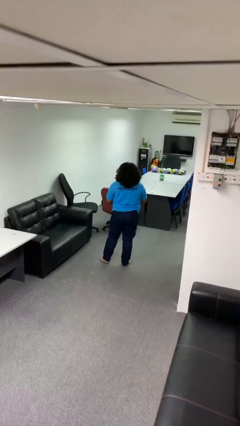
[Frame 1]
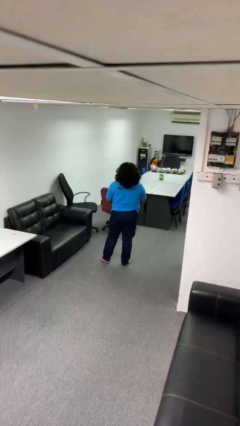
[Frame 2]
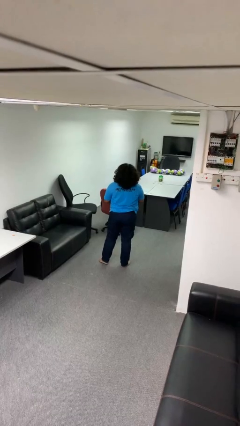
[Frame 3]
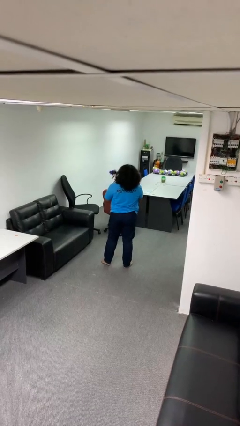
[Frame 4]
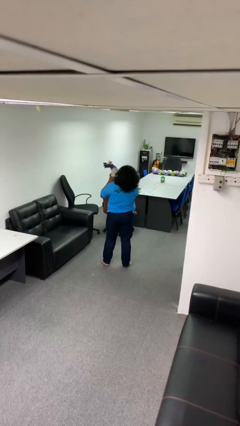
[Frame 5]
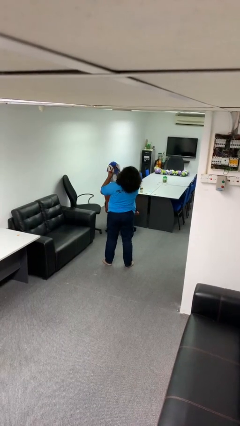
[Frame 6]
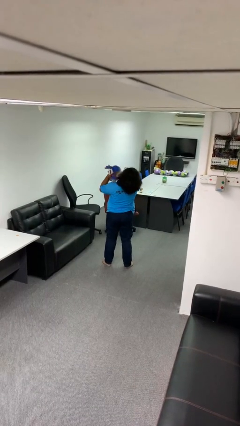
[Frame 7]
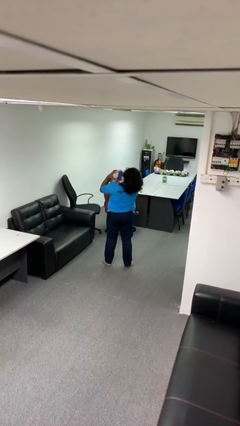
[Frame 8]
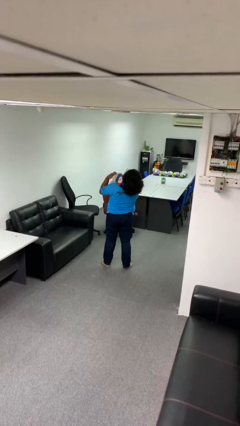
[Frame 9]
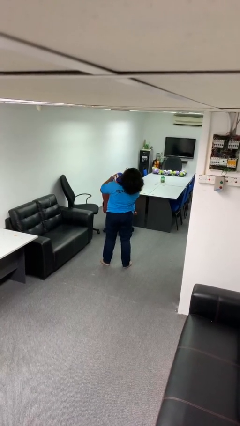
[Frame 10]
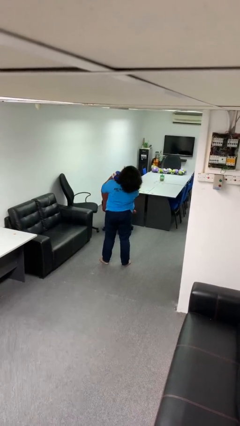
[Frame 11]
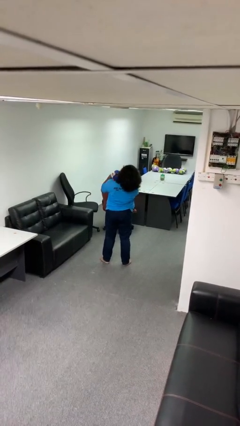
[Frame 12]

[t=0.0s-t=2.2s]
person hugs stuffed animal

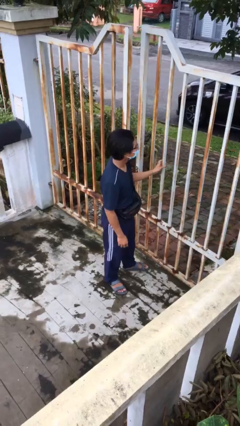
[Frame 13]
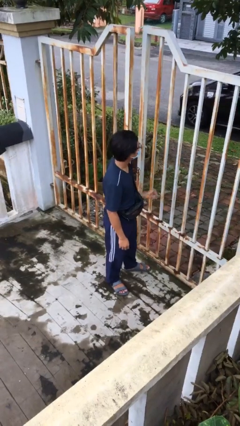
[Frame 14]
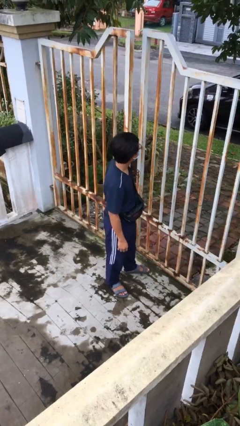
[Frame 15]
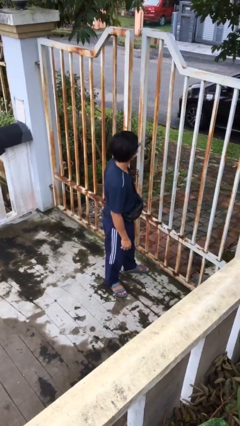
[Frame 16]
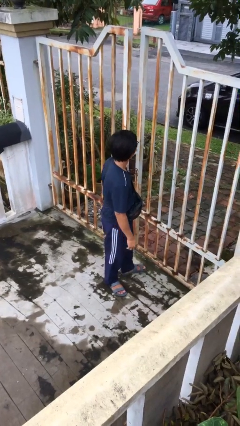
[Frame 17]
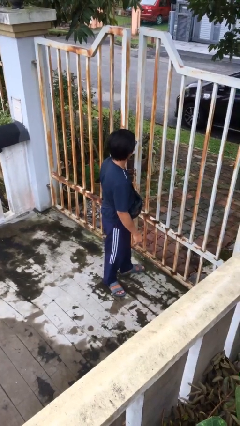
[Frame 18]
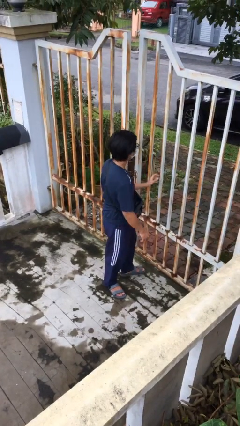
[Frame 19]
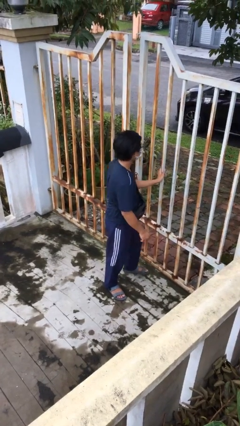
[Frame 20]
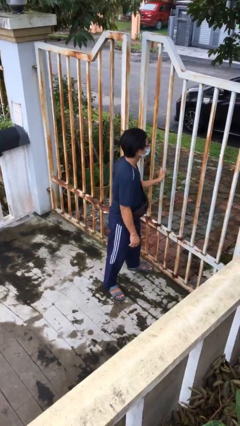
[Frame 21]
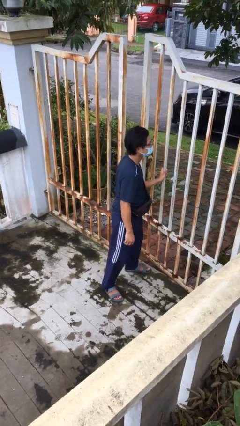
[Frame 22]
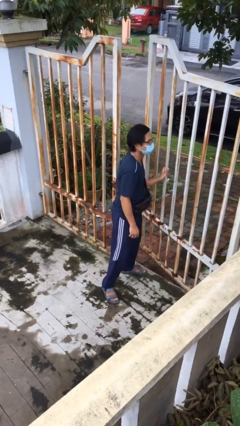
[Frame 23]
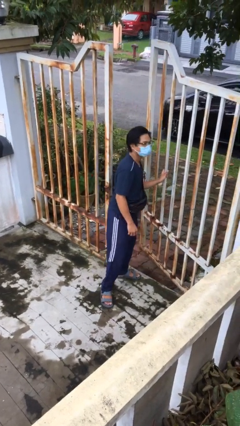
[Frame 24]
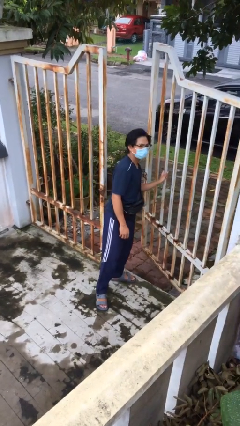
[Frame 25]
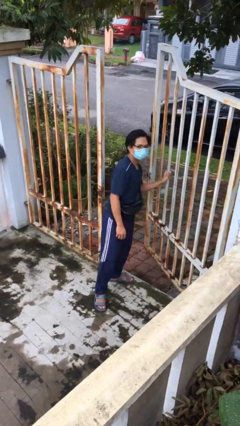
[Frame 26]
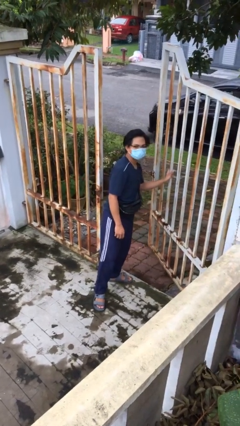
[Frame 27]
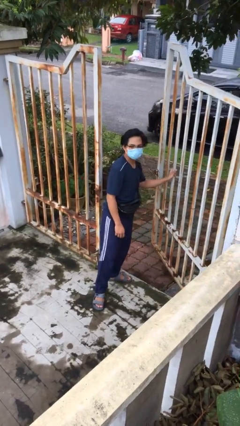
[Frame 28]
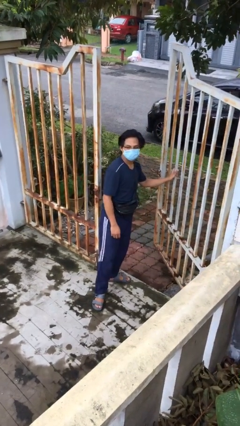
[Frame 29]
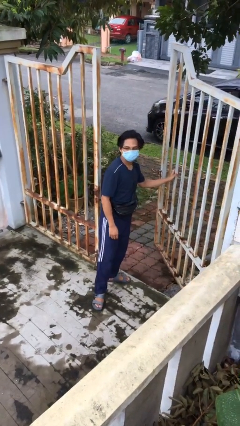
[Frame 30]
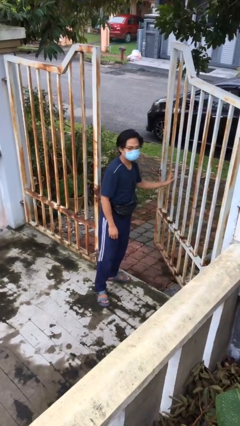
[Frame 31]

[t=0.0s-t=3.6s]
person opens facility door

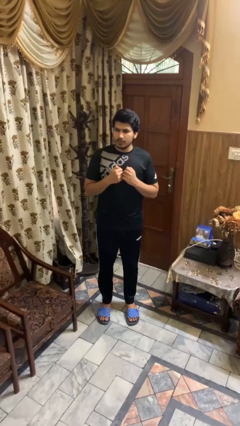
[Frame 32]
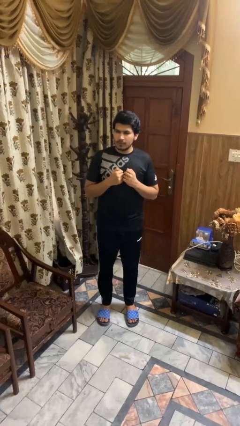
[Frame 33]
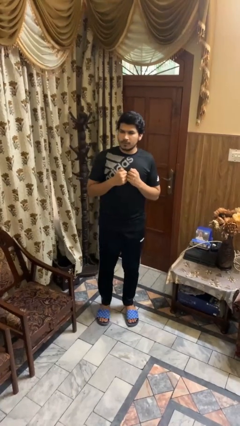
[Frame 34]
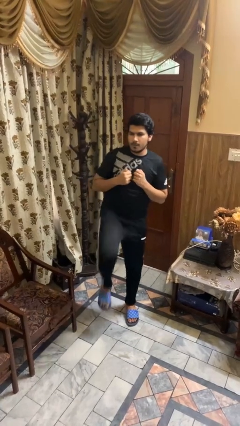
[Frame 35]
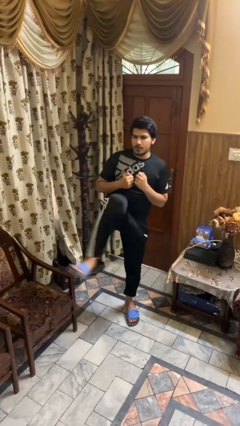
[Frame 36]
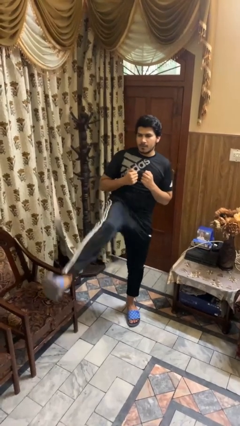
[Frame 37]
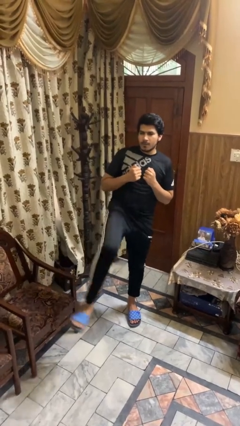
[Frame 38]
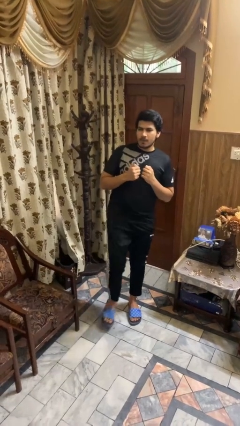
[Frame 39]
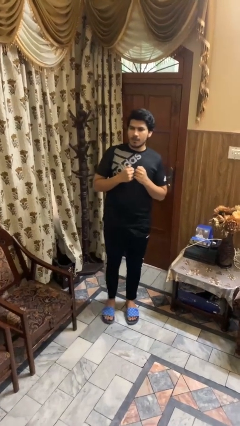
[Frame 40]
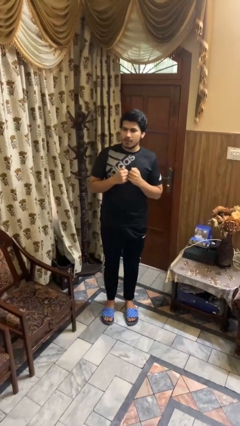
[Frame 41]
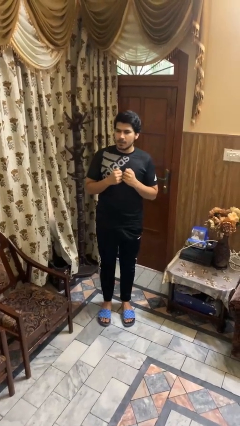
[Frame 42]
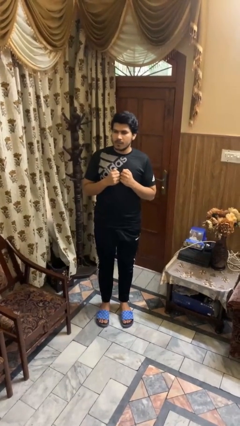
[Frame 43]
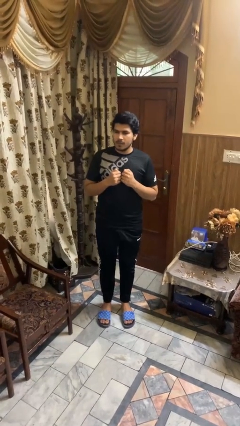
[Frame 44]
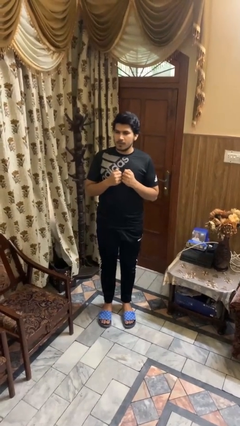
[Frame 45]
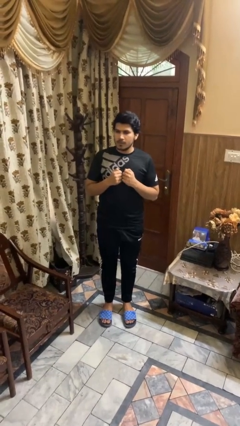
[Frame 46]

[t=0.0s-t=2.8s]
person karate kicks

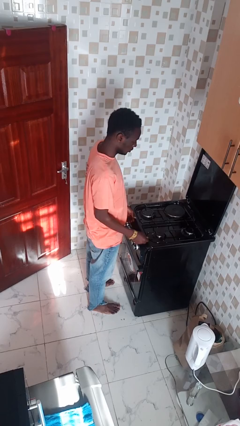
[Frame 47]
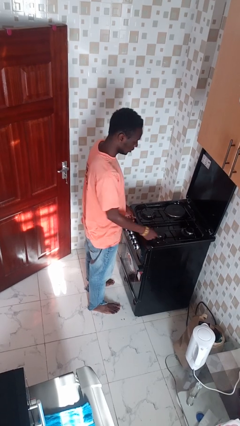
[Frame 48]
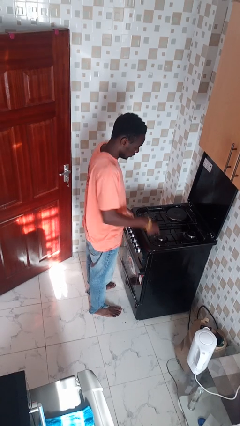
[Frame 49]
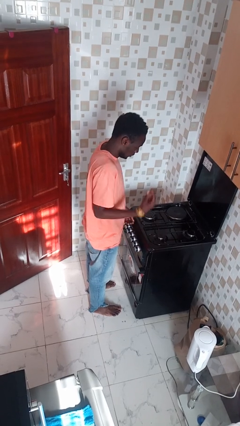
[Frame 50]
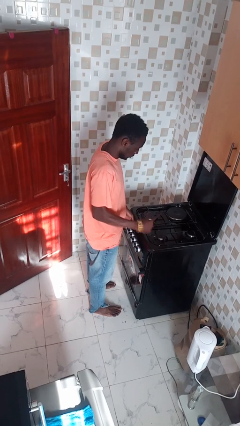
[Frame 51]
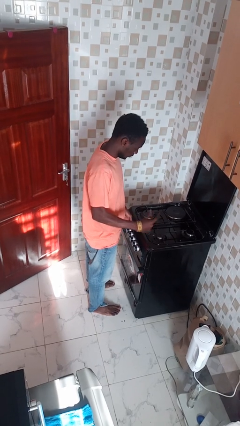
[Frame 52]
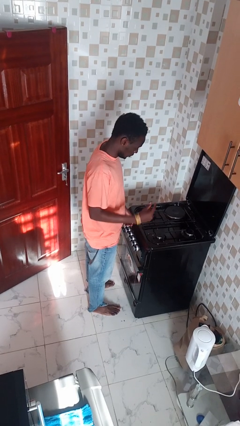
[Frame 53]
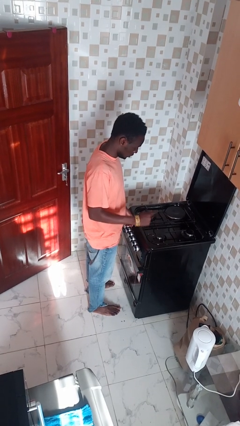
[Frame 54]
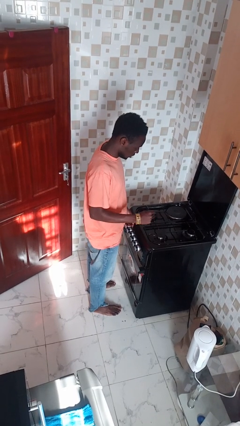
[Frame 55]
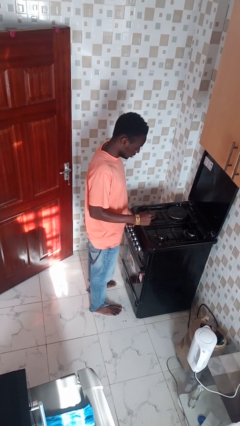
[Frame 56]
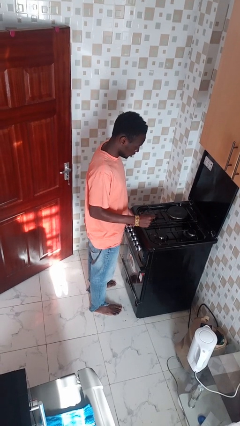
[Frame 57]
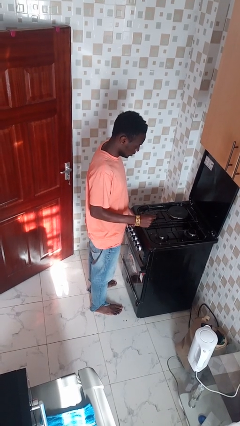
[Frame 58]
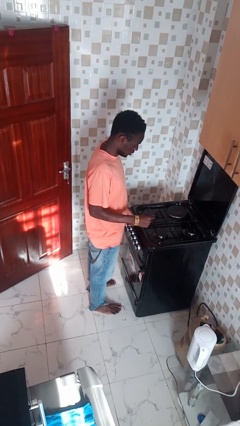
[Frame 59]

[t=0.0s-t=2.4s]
person burns hand

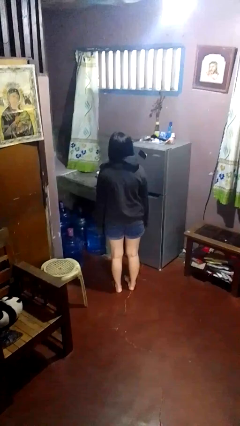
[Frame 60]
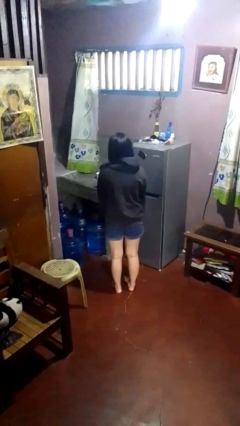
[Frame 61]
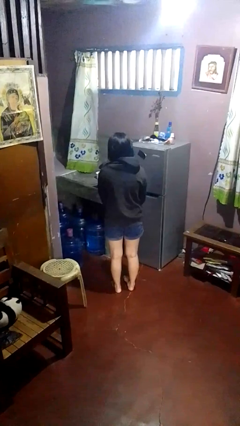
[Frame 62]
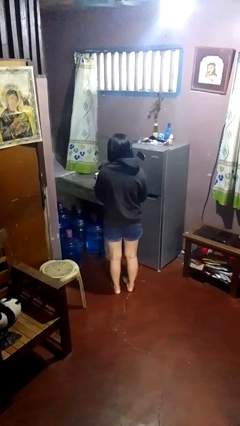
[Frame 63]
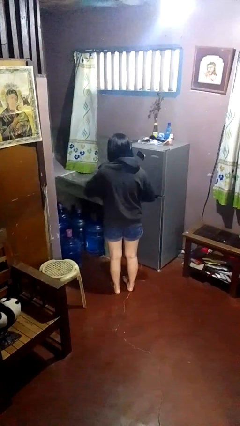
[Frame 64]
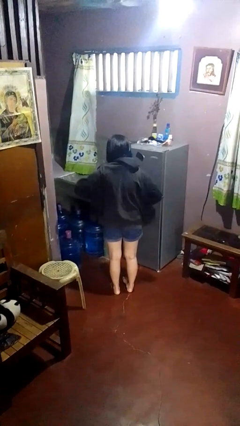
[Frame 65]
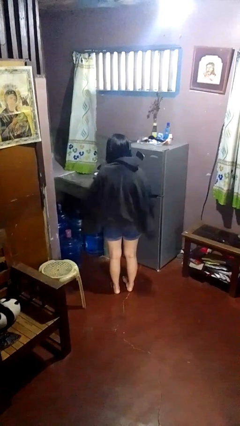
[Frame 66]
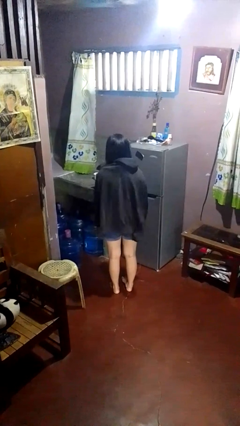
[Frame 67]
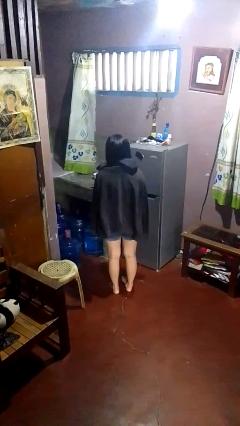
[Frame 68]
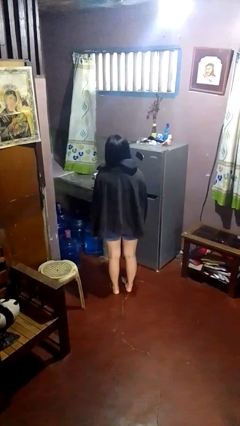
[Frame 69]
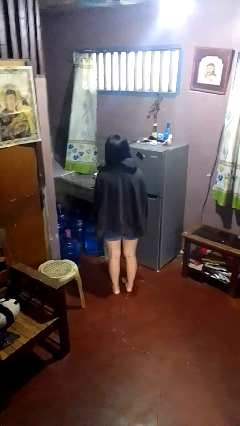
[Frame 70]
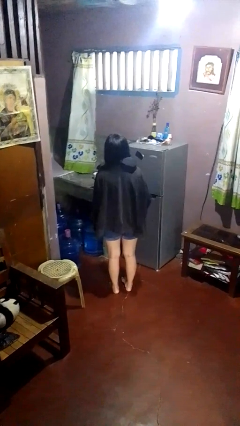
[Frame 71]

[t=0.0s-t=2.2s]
person unzips jacket

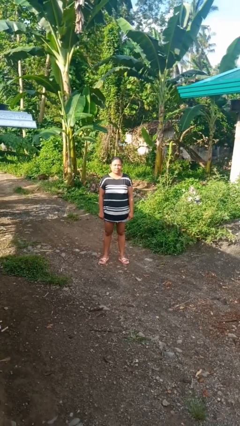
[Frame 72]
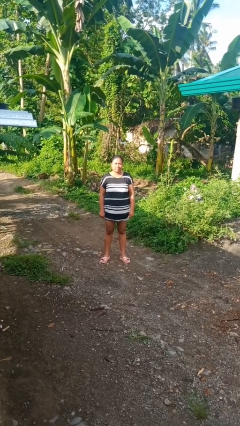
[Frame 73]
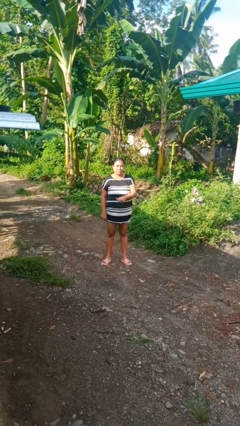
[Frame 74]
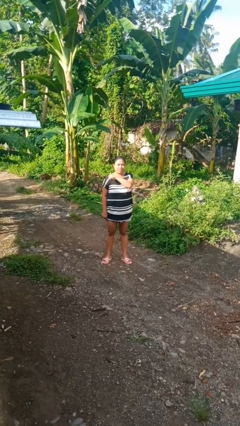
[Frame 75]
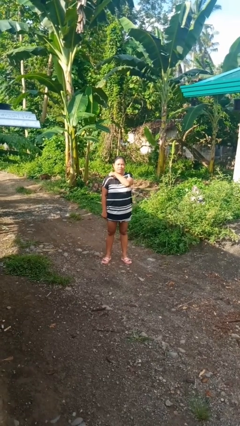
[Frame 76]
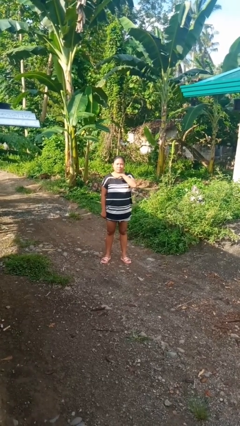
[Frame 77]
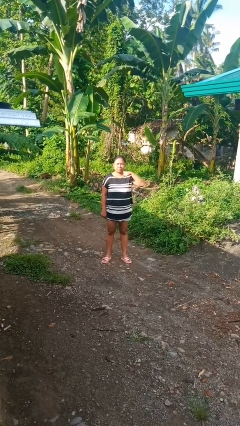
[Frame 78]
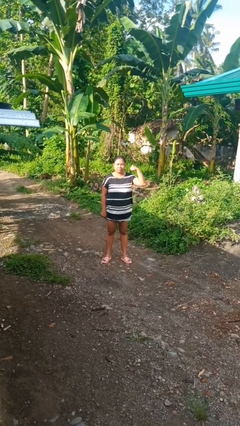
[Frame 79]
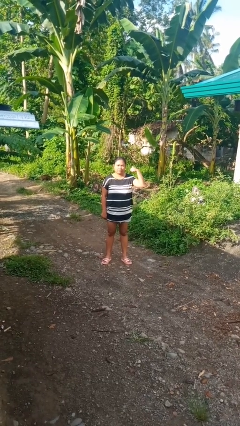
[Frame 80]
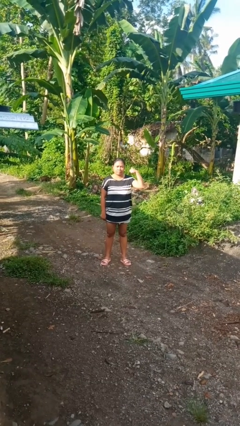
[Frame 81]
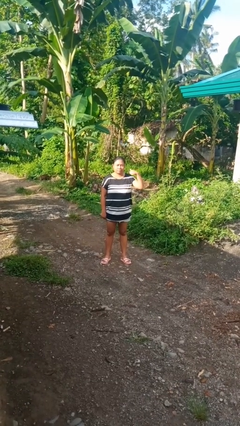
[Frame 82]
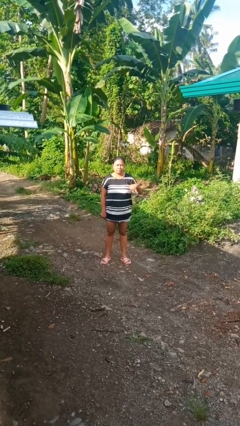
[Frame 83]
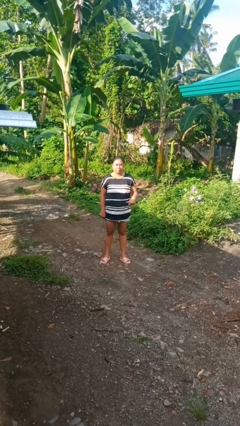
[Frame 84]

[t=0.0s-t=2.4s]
person gestures cut

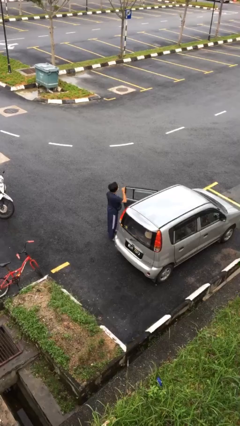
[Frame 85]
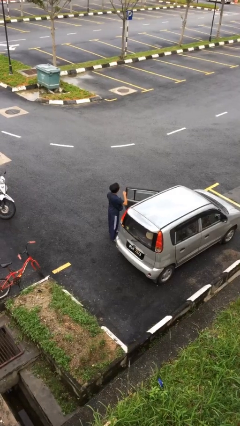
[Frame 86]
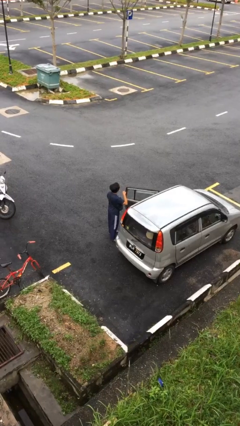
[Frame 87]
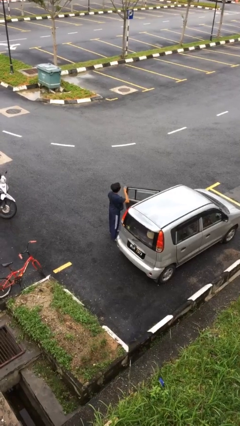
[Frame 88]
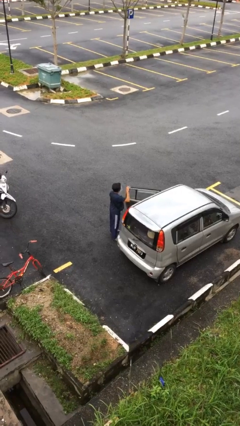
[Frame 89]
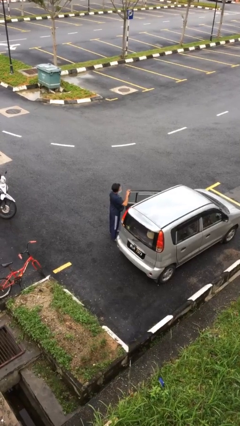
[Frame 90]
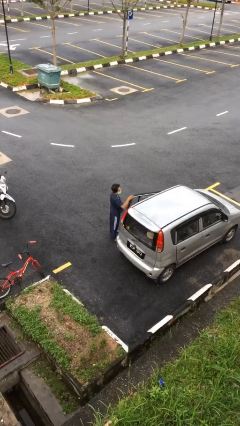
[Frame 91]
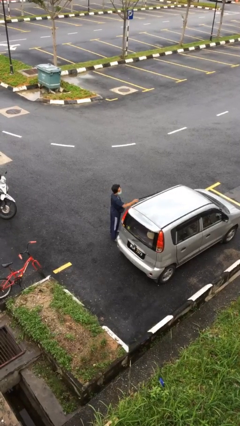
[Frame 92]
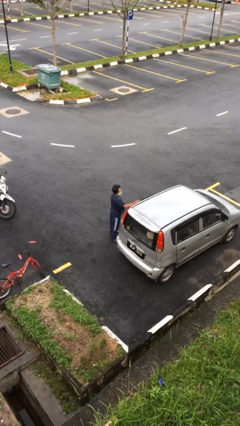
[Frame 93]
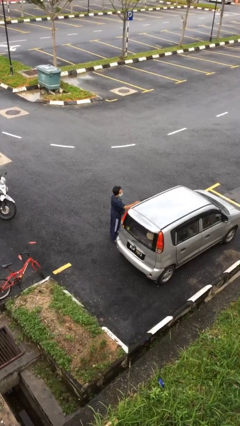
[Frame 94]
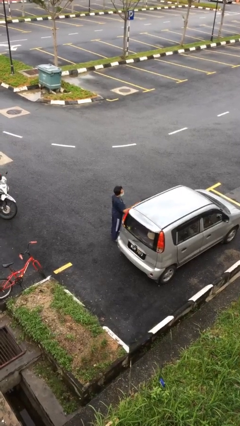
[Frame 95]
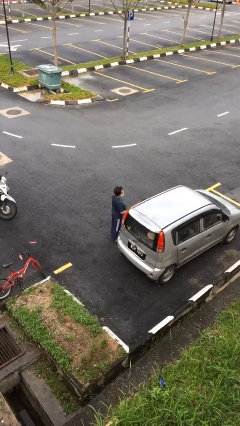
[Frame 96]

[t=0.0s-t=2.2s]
person closes car door
